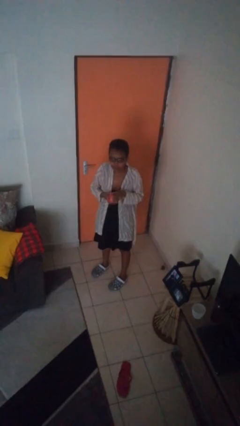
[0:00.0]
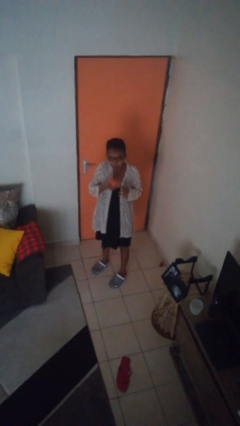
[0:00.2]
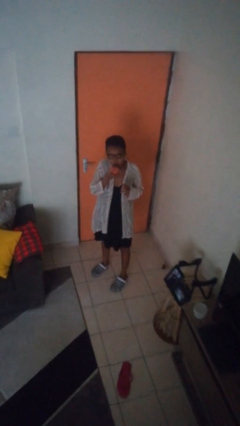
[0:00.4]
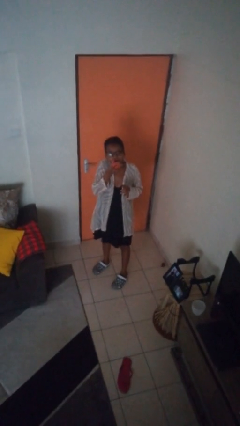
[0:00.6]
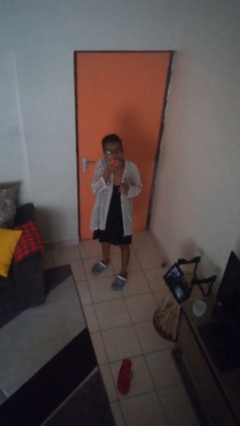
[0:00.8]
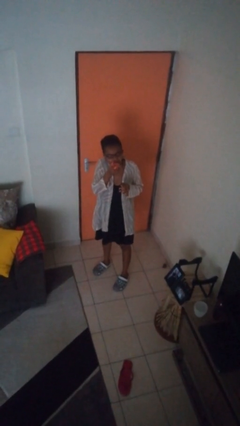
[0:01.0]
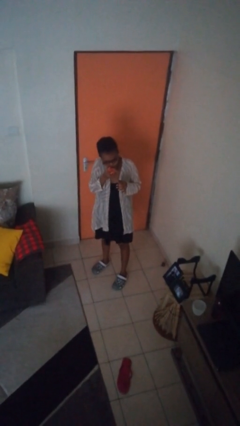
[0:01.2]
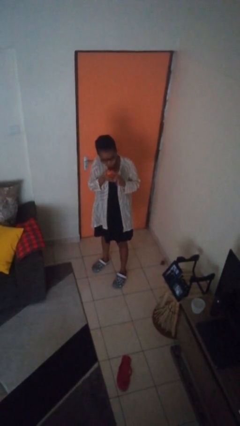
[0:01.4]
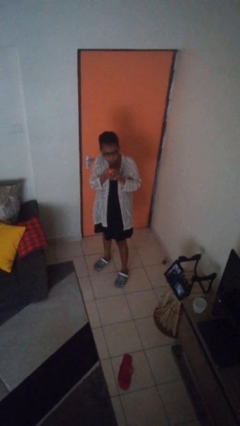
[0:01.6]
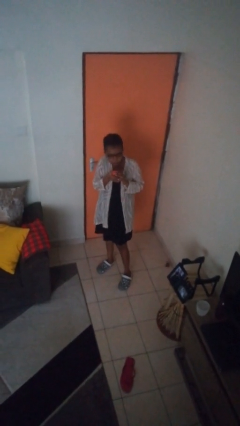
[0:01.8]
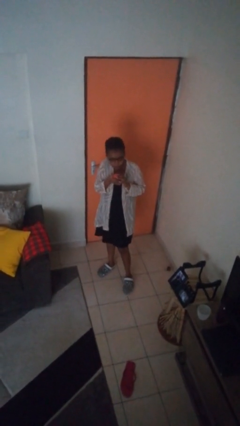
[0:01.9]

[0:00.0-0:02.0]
person eats apple

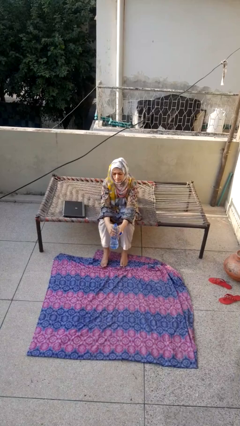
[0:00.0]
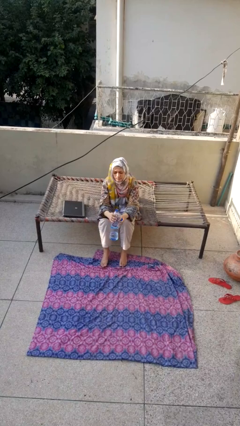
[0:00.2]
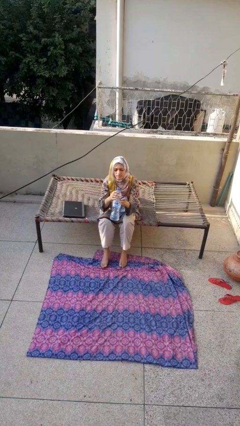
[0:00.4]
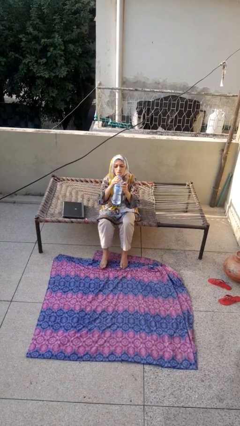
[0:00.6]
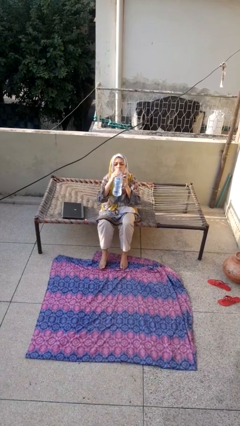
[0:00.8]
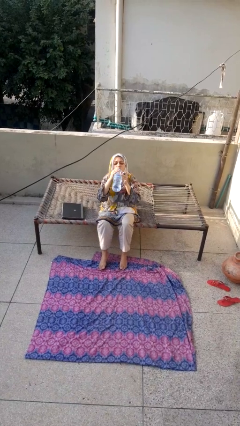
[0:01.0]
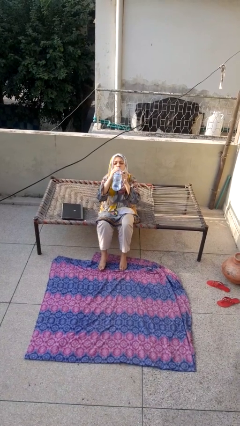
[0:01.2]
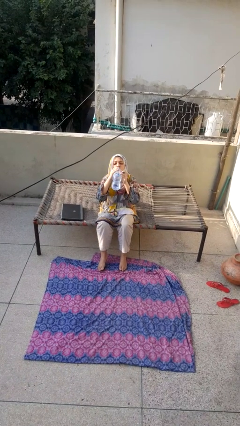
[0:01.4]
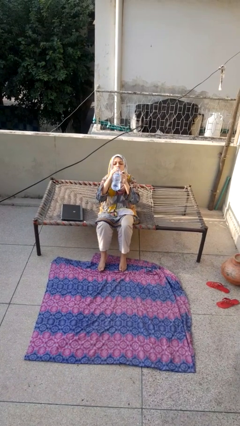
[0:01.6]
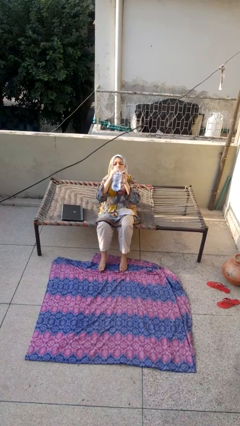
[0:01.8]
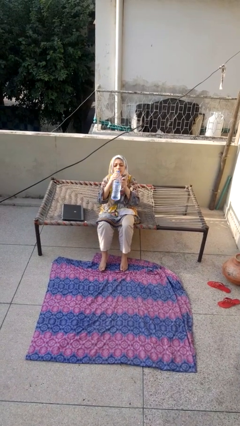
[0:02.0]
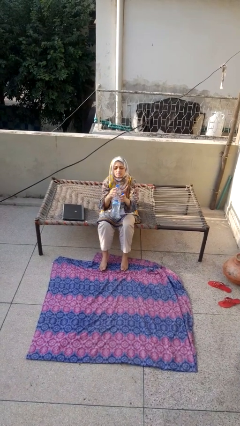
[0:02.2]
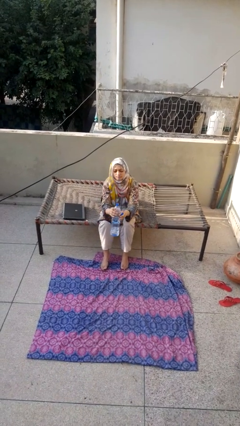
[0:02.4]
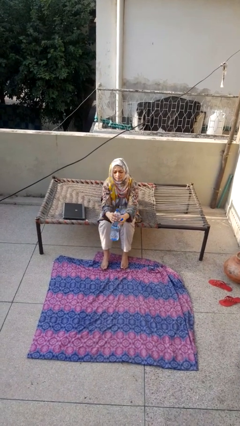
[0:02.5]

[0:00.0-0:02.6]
person drinks from bottle

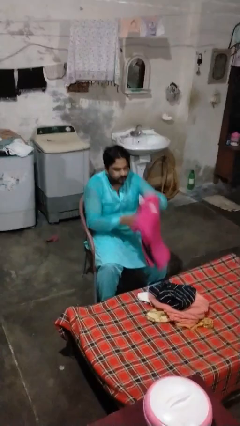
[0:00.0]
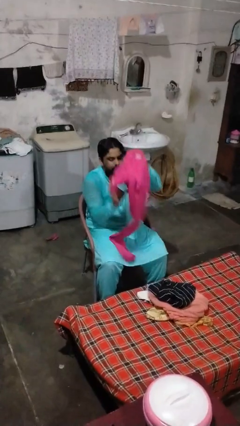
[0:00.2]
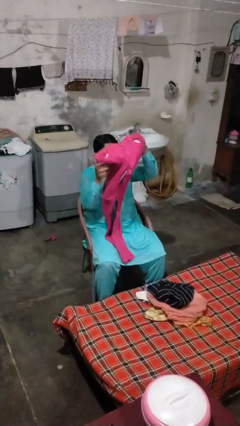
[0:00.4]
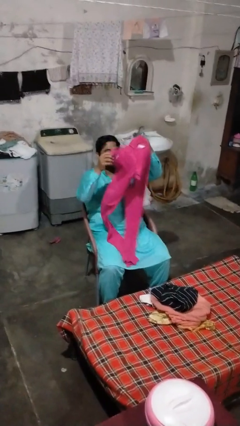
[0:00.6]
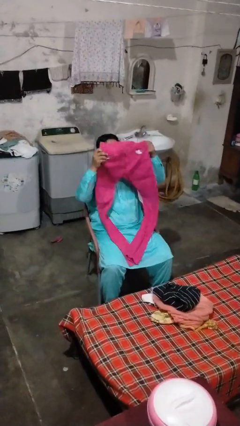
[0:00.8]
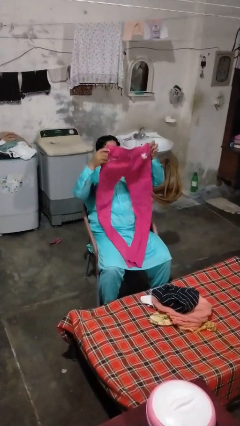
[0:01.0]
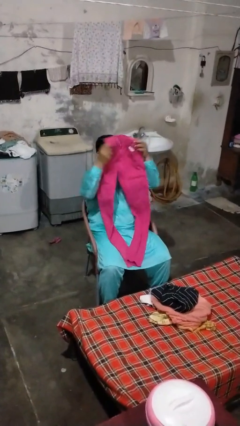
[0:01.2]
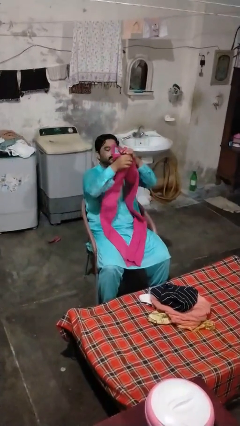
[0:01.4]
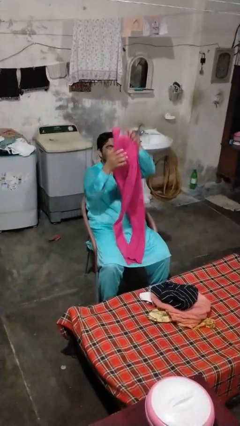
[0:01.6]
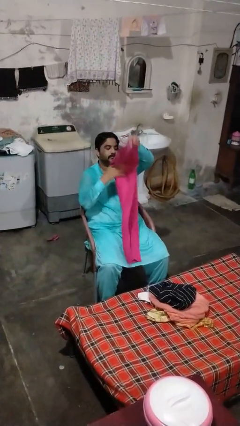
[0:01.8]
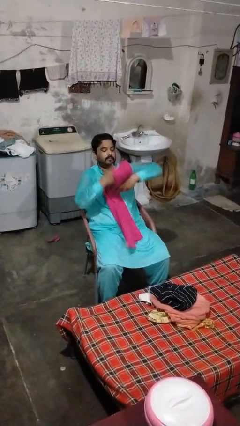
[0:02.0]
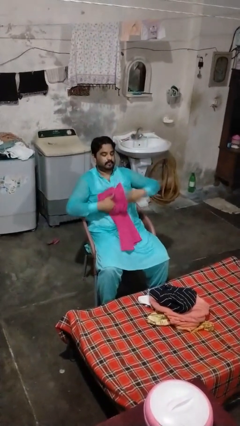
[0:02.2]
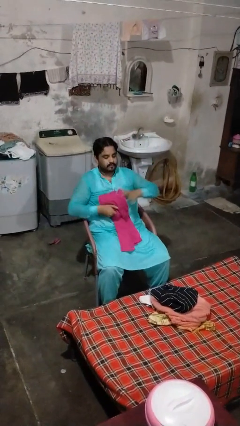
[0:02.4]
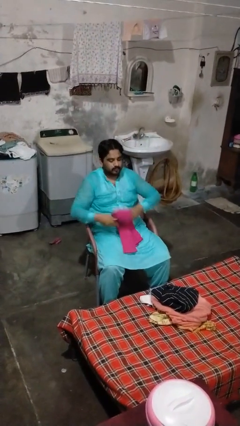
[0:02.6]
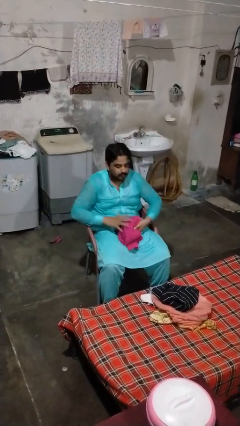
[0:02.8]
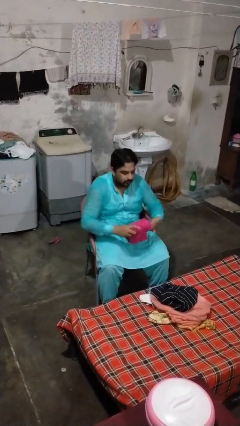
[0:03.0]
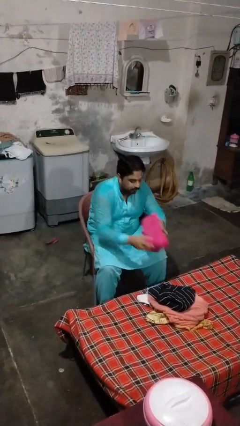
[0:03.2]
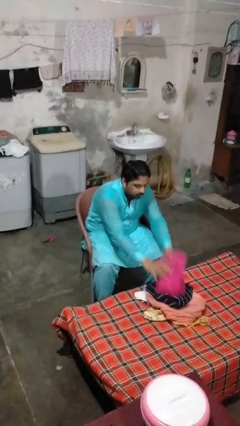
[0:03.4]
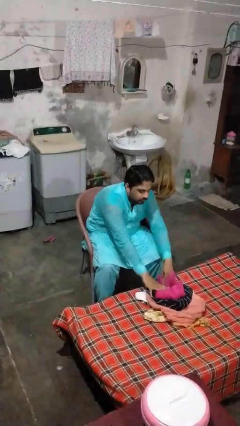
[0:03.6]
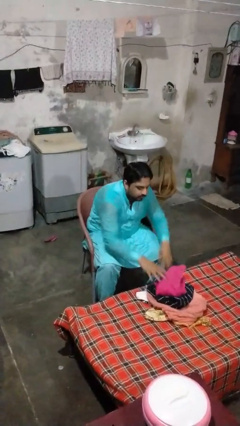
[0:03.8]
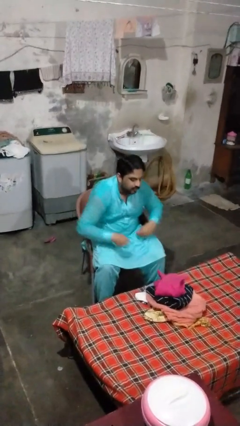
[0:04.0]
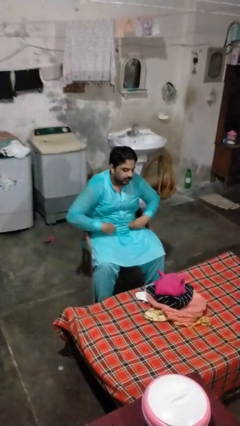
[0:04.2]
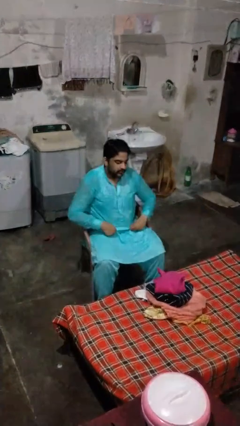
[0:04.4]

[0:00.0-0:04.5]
person folds pants

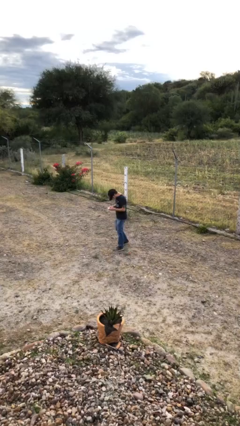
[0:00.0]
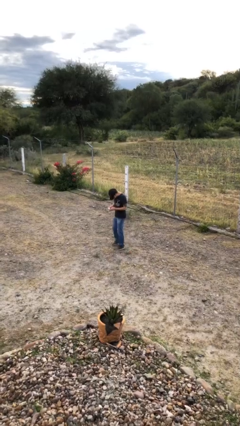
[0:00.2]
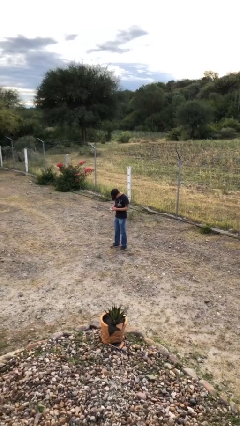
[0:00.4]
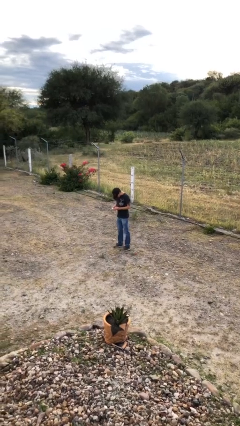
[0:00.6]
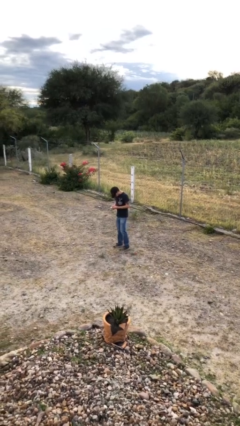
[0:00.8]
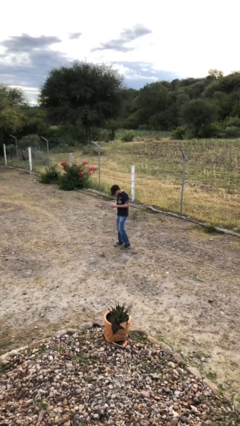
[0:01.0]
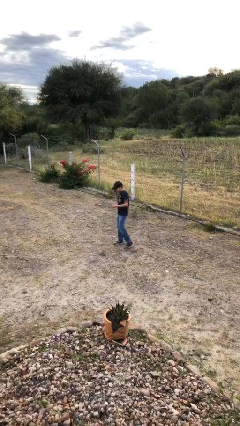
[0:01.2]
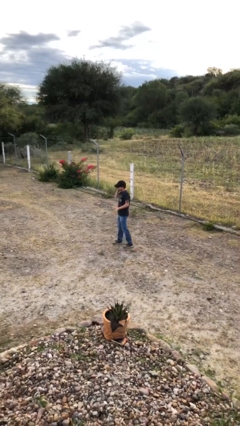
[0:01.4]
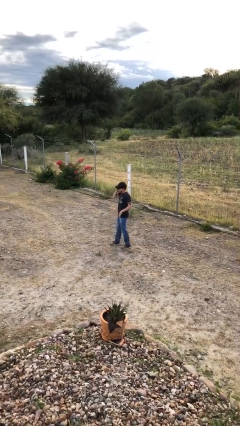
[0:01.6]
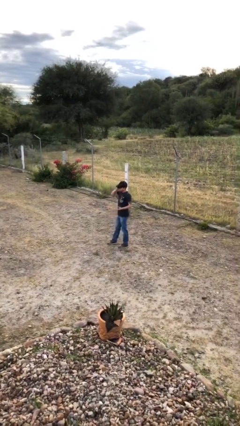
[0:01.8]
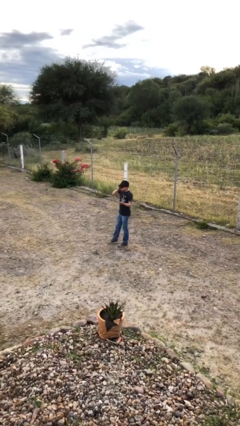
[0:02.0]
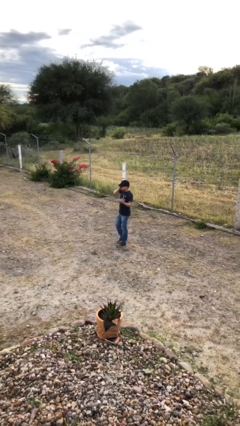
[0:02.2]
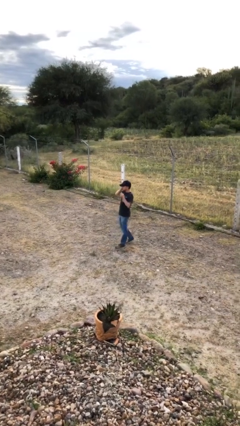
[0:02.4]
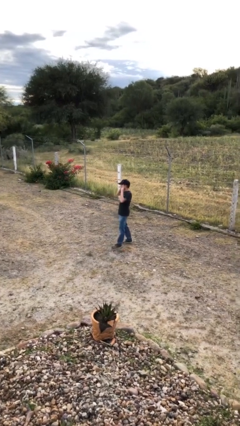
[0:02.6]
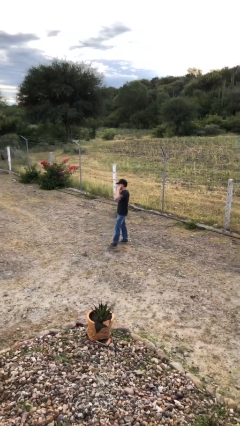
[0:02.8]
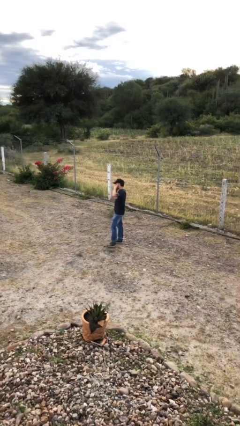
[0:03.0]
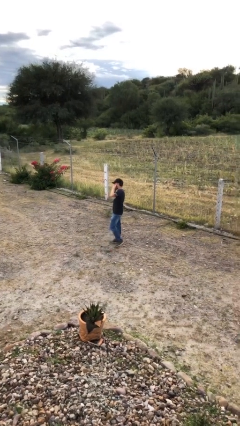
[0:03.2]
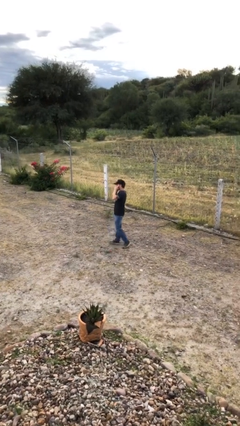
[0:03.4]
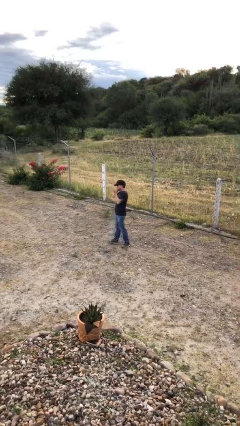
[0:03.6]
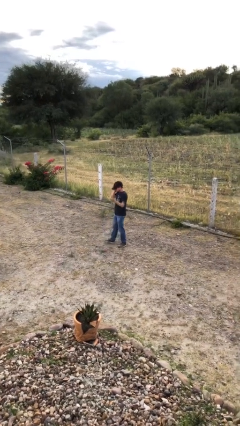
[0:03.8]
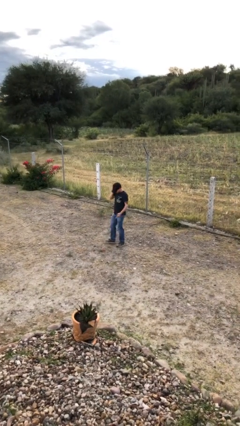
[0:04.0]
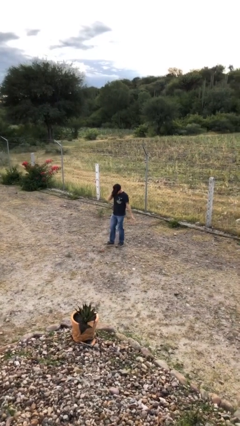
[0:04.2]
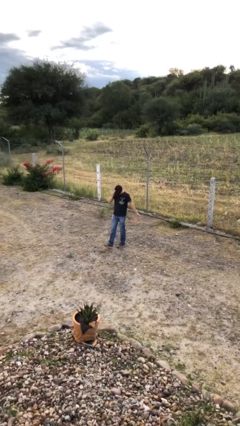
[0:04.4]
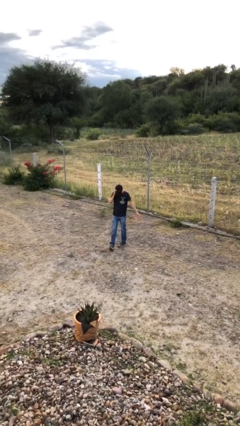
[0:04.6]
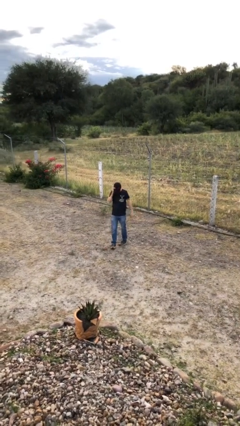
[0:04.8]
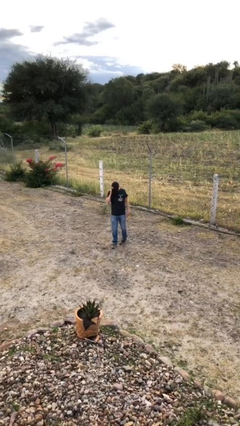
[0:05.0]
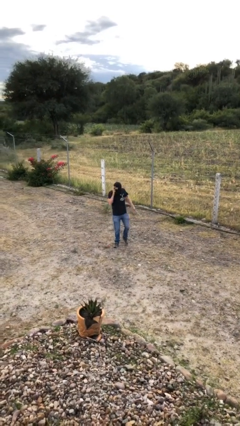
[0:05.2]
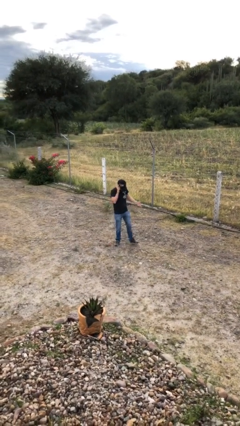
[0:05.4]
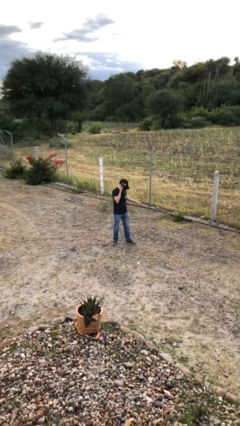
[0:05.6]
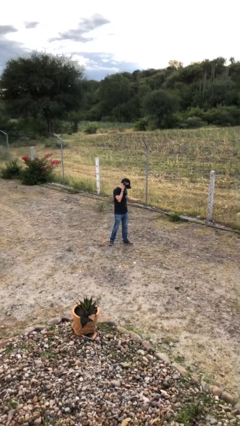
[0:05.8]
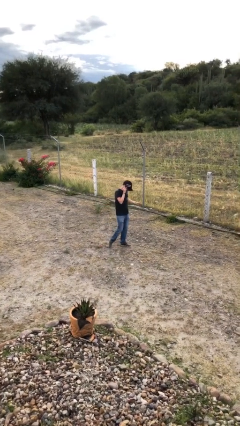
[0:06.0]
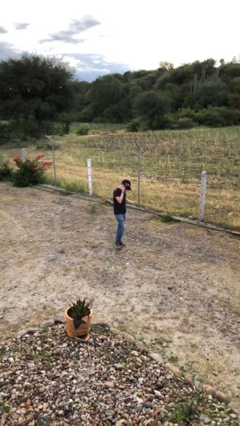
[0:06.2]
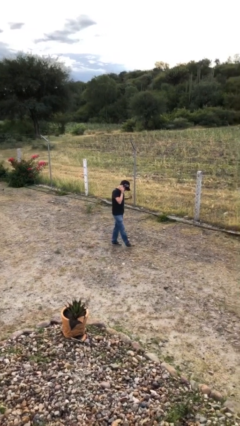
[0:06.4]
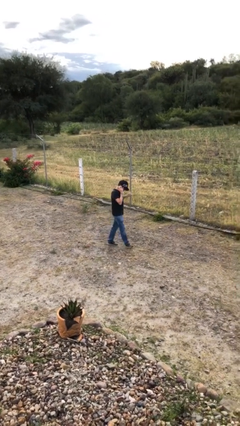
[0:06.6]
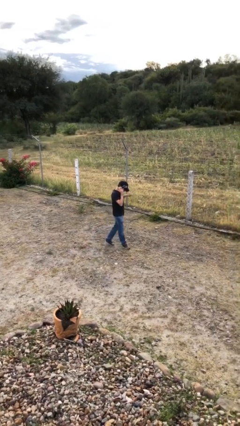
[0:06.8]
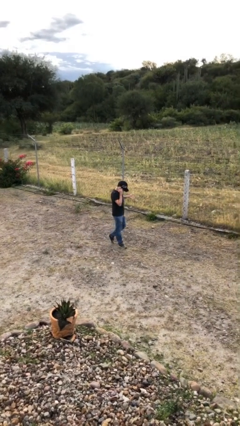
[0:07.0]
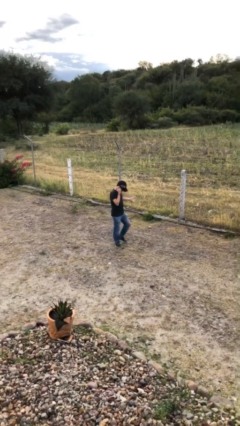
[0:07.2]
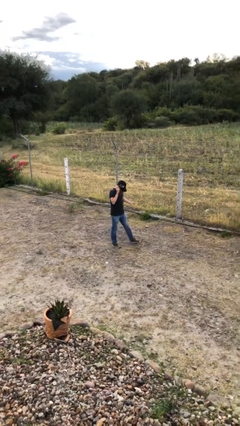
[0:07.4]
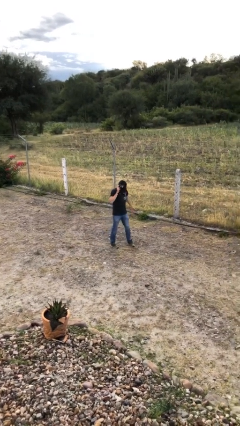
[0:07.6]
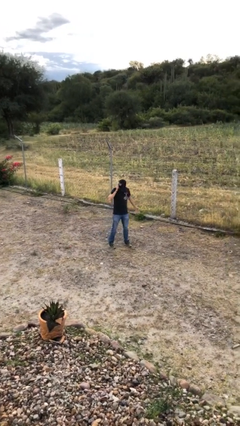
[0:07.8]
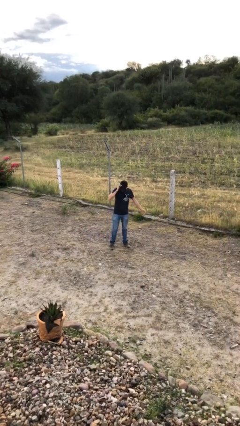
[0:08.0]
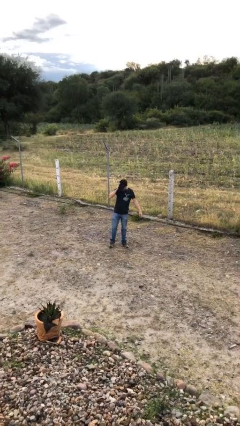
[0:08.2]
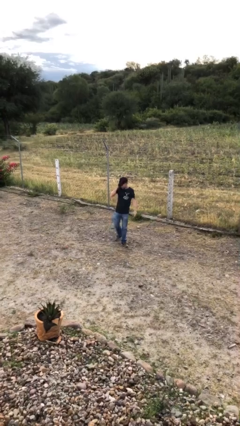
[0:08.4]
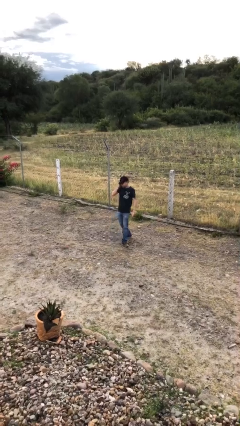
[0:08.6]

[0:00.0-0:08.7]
person talks on phone

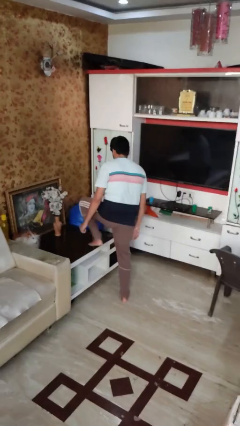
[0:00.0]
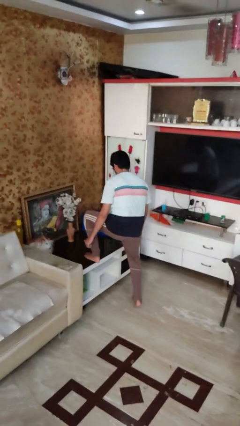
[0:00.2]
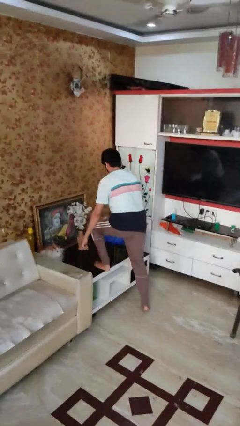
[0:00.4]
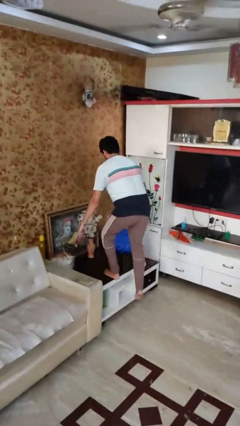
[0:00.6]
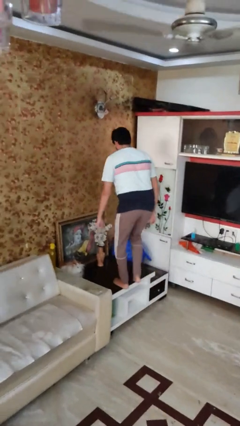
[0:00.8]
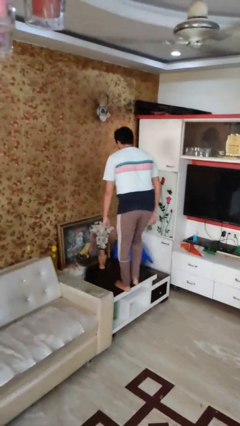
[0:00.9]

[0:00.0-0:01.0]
person climbs on table
